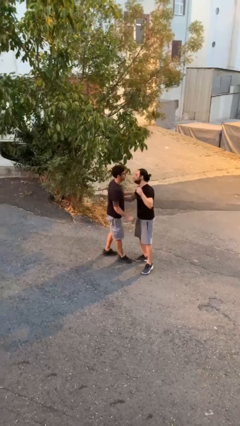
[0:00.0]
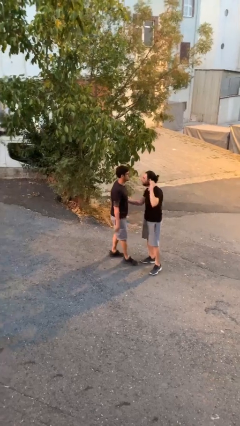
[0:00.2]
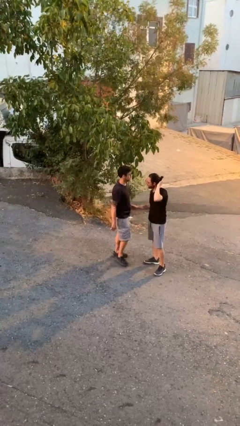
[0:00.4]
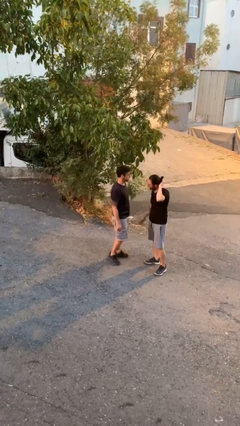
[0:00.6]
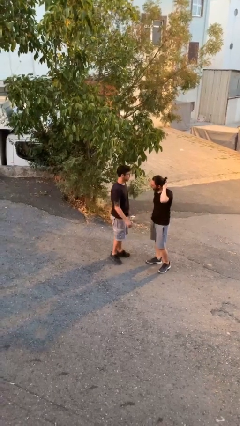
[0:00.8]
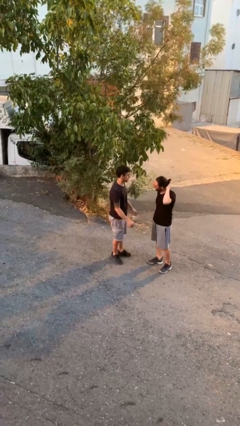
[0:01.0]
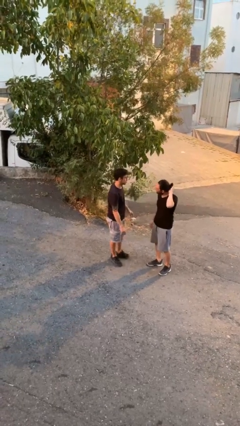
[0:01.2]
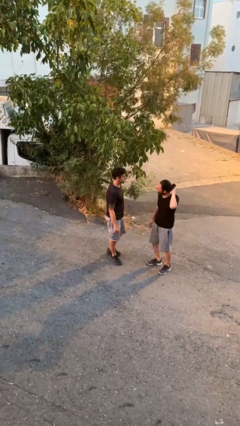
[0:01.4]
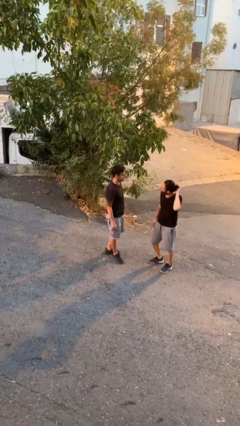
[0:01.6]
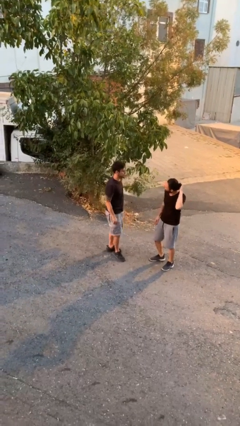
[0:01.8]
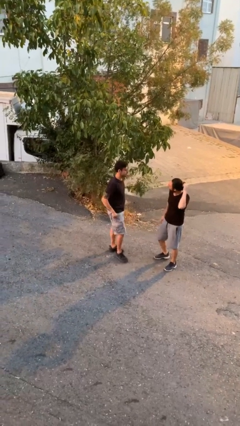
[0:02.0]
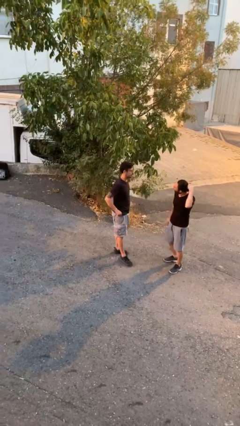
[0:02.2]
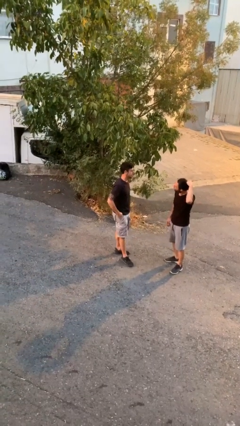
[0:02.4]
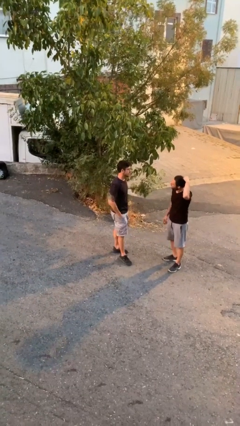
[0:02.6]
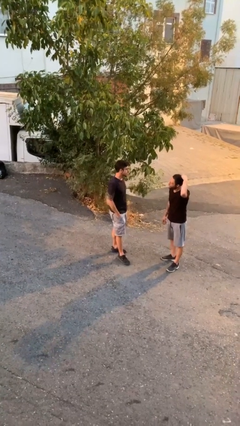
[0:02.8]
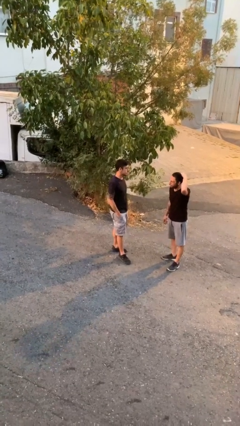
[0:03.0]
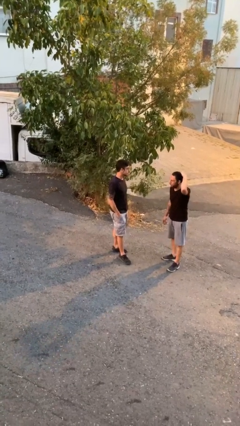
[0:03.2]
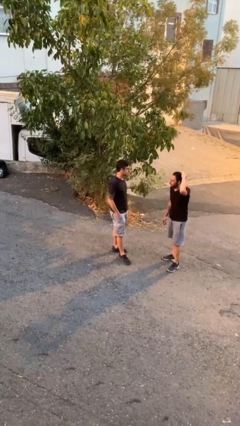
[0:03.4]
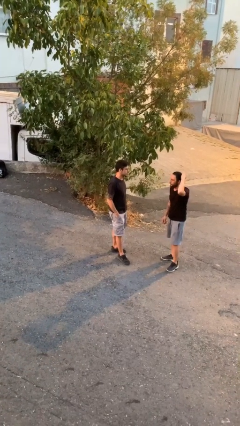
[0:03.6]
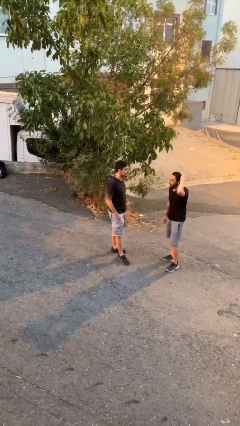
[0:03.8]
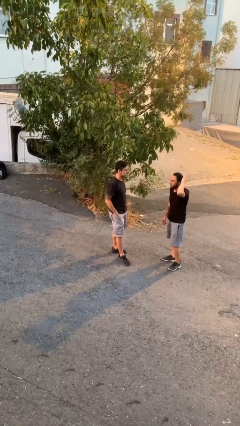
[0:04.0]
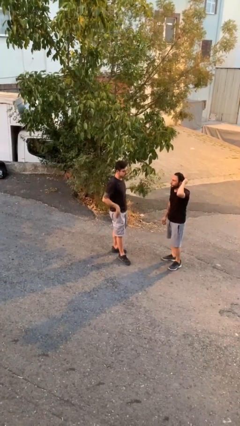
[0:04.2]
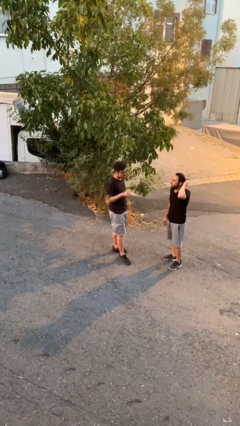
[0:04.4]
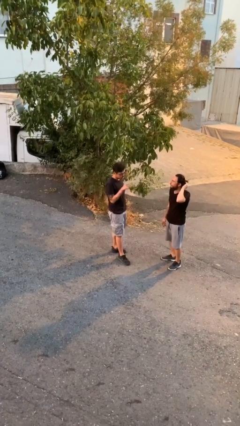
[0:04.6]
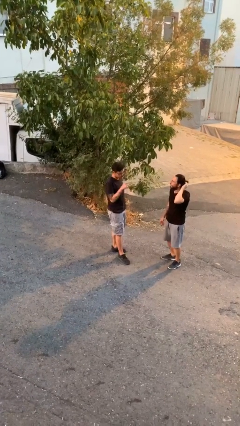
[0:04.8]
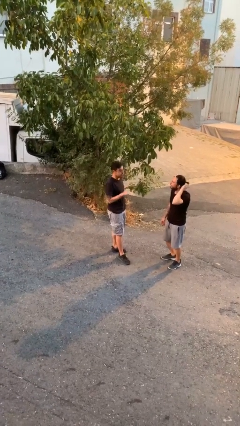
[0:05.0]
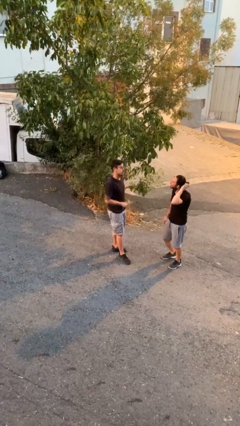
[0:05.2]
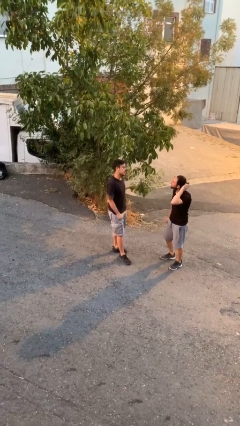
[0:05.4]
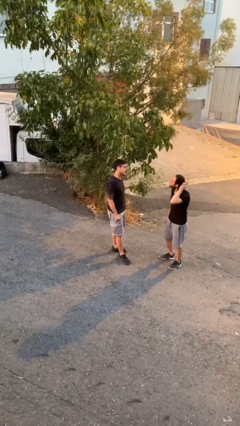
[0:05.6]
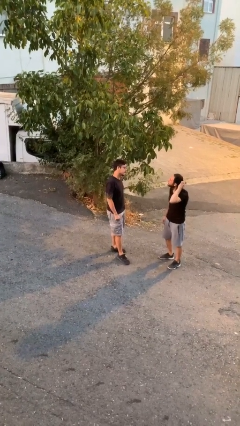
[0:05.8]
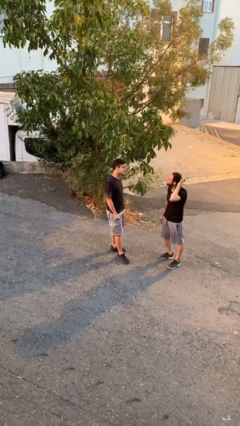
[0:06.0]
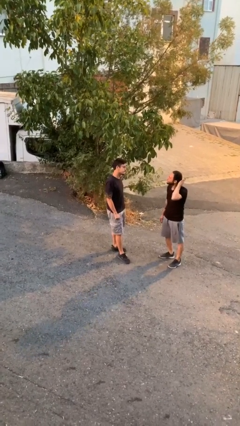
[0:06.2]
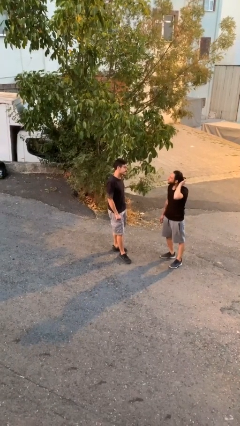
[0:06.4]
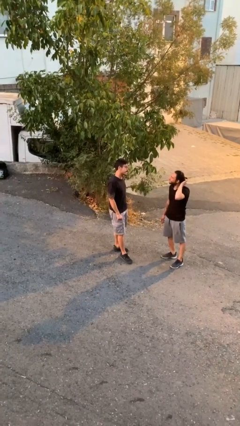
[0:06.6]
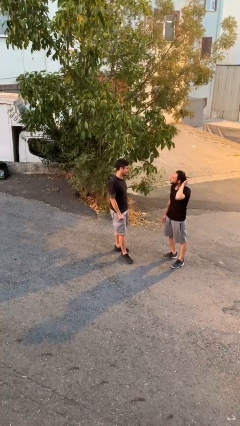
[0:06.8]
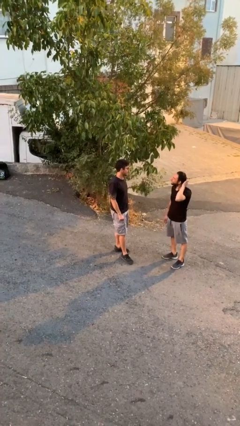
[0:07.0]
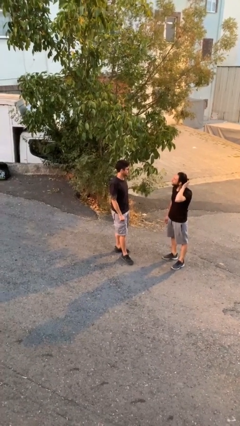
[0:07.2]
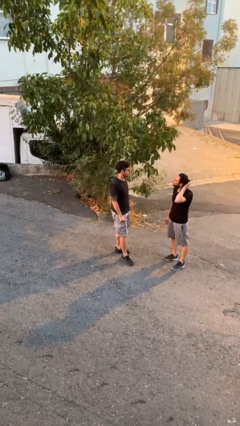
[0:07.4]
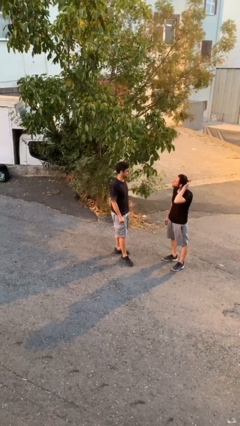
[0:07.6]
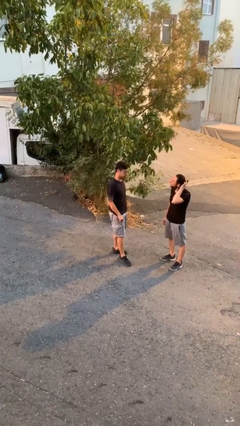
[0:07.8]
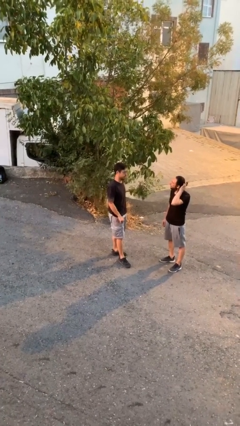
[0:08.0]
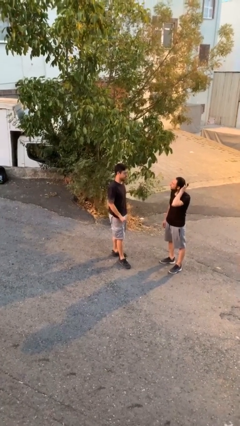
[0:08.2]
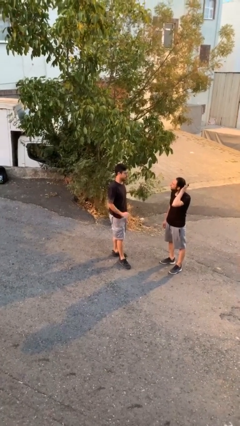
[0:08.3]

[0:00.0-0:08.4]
person talks to person

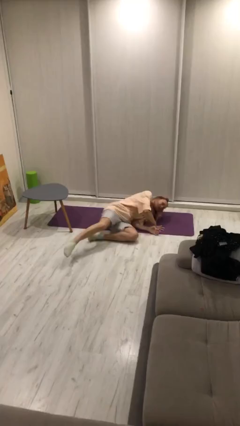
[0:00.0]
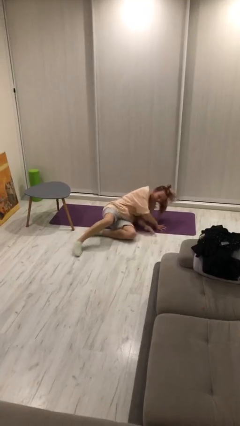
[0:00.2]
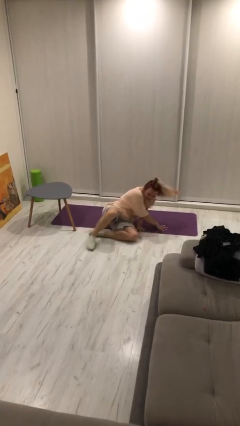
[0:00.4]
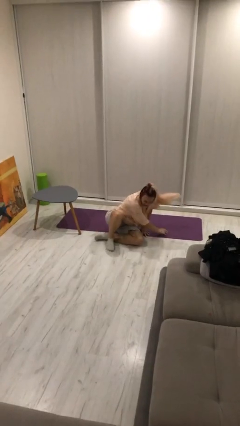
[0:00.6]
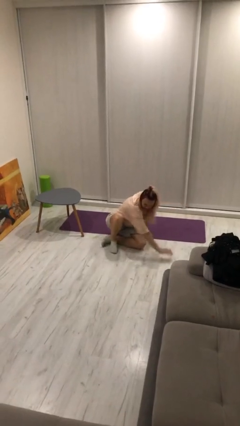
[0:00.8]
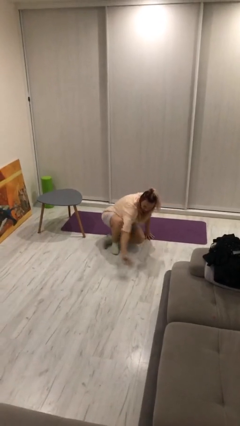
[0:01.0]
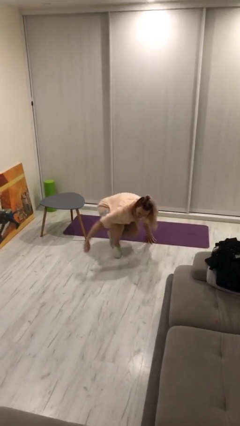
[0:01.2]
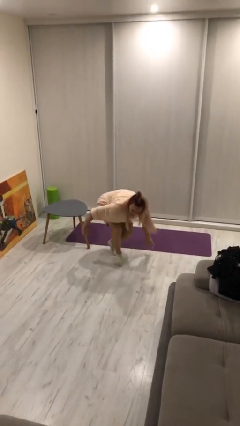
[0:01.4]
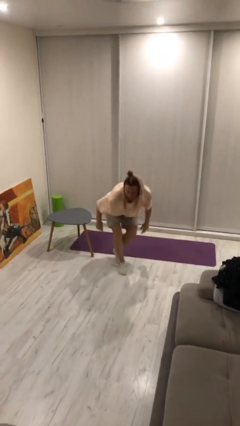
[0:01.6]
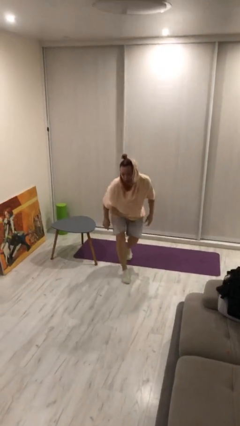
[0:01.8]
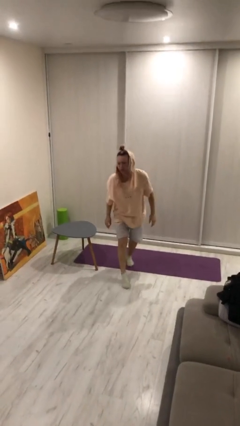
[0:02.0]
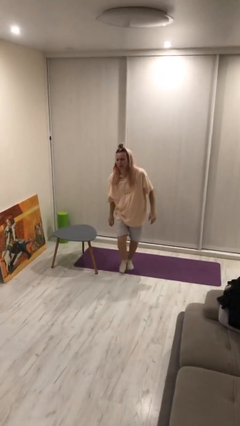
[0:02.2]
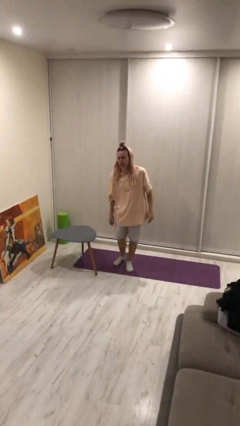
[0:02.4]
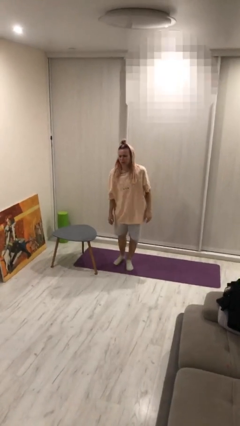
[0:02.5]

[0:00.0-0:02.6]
person stands up from floor

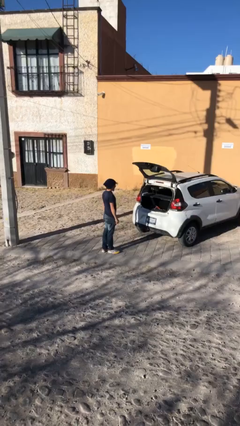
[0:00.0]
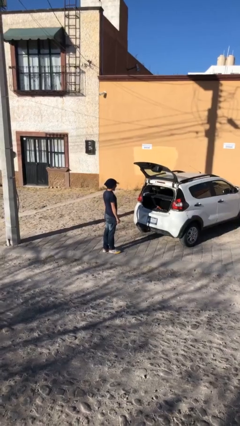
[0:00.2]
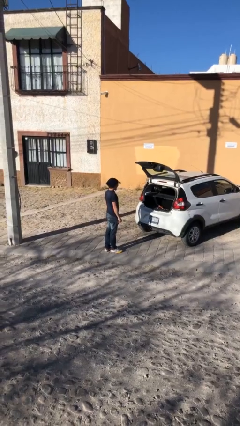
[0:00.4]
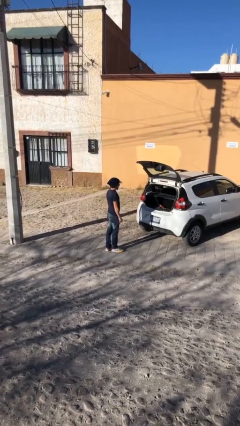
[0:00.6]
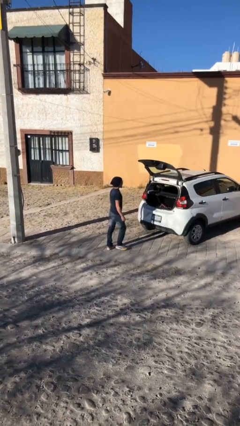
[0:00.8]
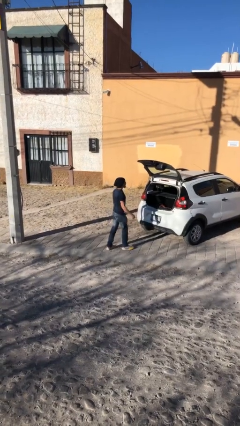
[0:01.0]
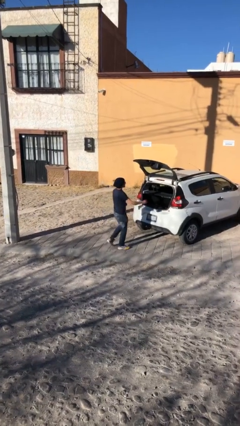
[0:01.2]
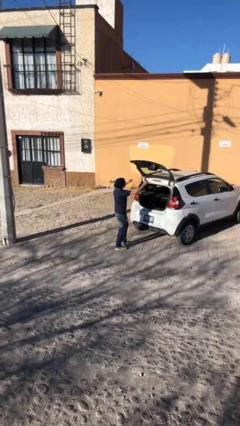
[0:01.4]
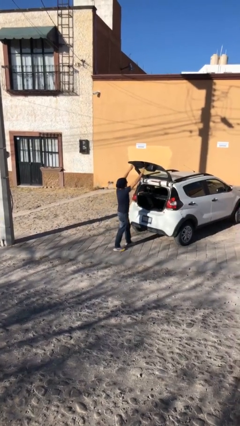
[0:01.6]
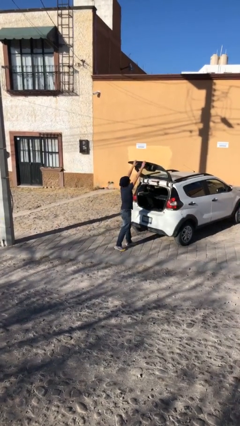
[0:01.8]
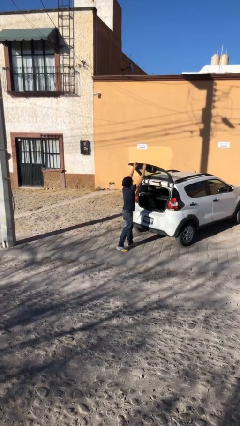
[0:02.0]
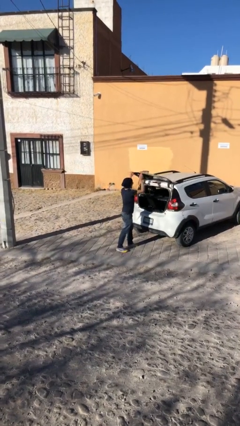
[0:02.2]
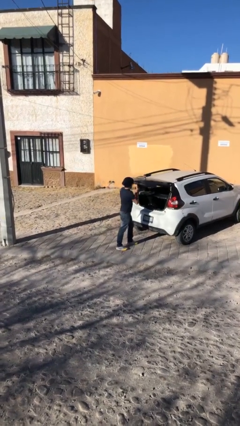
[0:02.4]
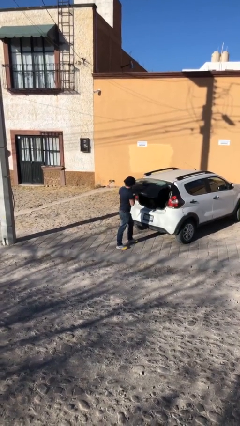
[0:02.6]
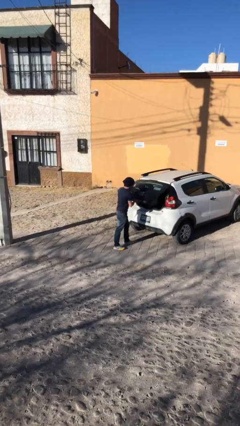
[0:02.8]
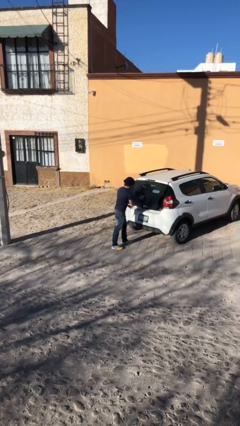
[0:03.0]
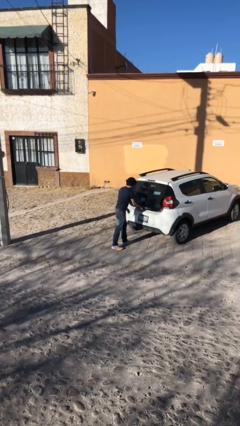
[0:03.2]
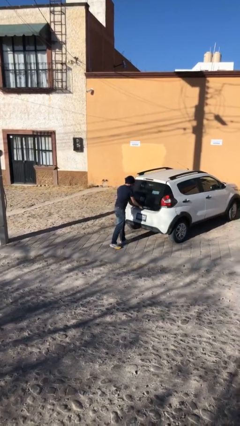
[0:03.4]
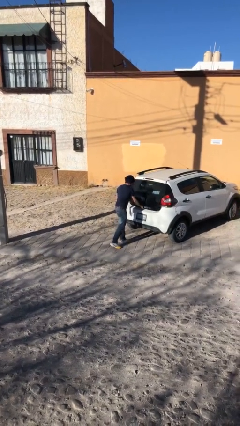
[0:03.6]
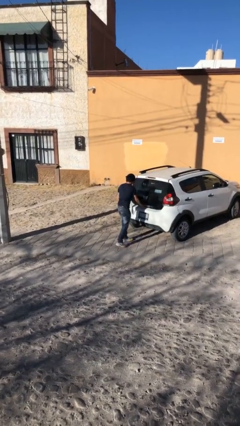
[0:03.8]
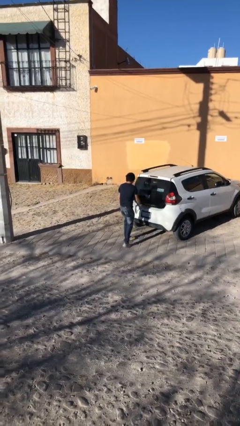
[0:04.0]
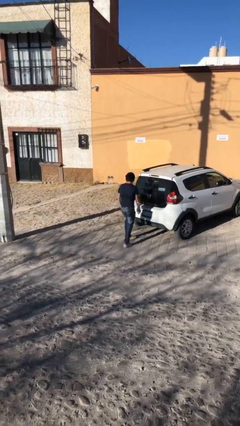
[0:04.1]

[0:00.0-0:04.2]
person closes car trunk

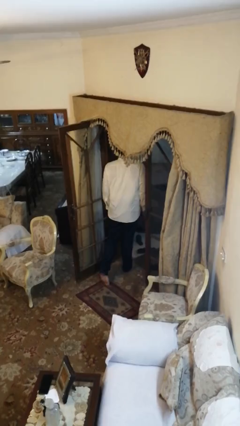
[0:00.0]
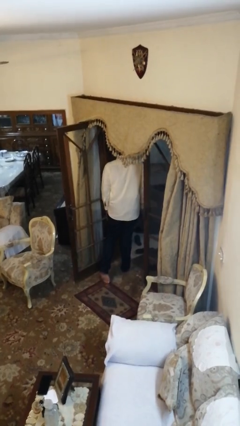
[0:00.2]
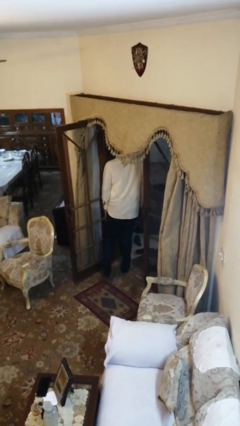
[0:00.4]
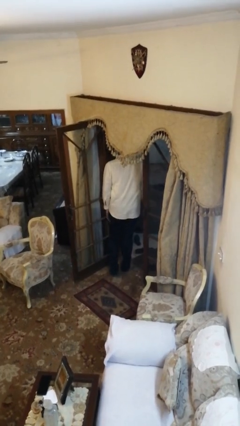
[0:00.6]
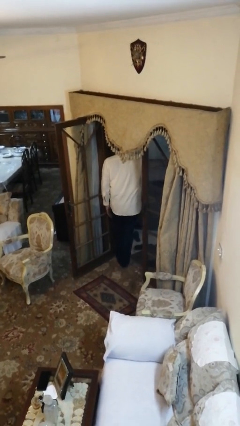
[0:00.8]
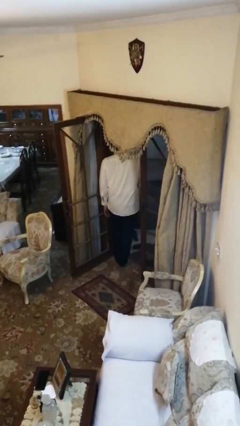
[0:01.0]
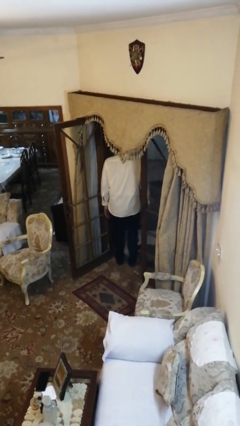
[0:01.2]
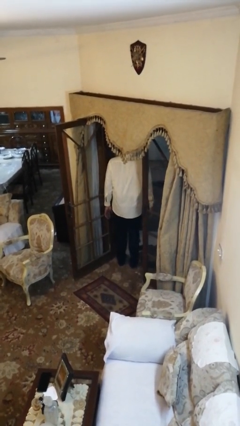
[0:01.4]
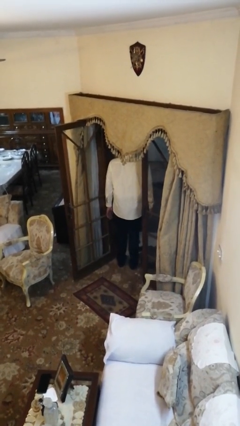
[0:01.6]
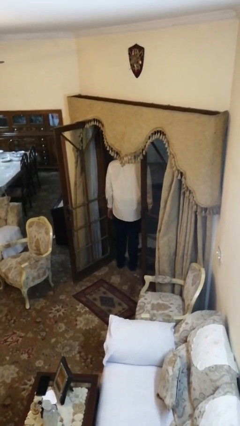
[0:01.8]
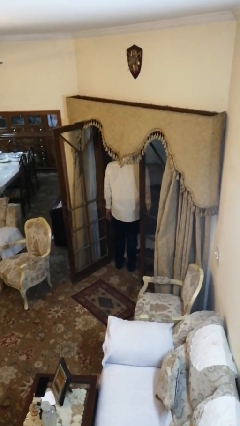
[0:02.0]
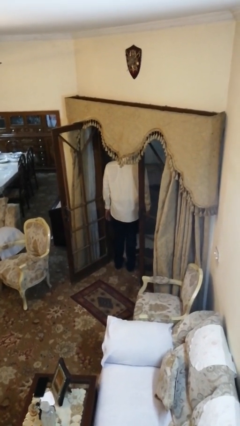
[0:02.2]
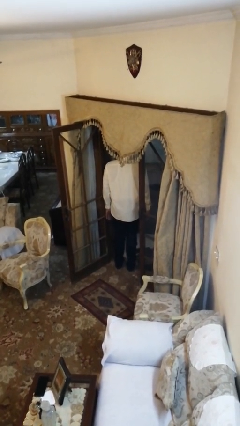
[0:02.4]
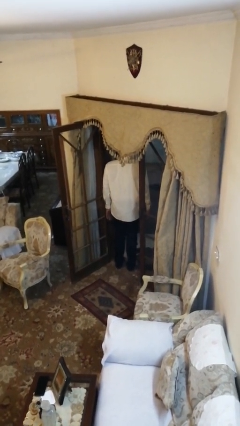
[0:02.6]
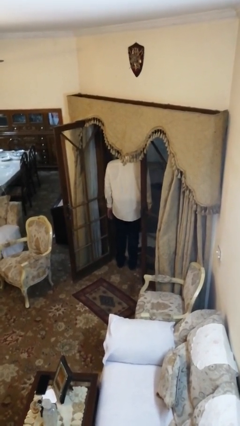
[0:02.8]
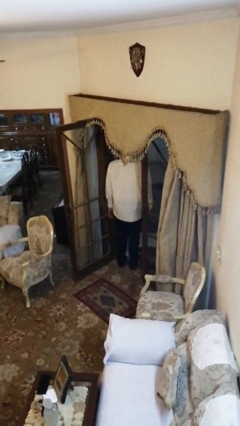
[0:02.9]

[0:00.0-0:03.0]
person bumps into wall
